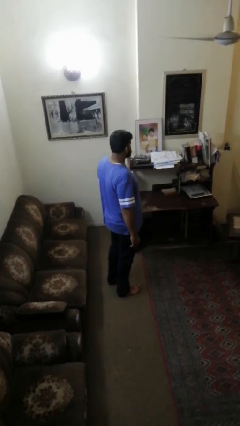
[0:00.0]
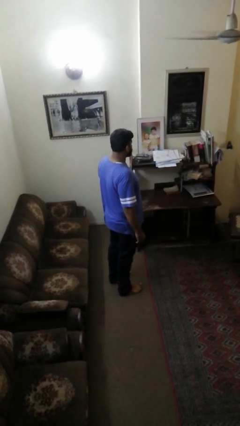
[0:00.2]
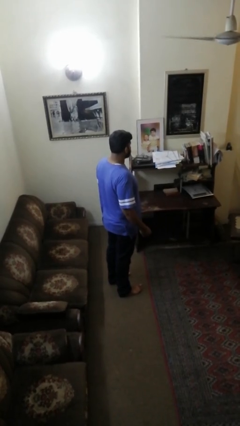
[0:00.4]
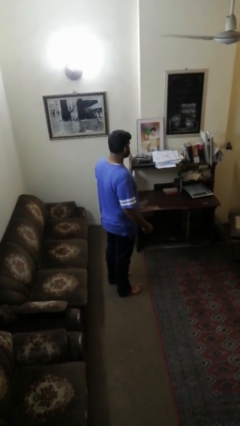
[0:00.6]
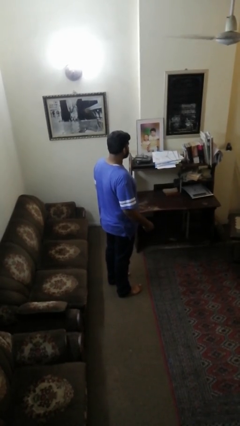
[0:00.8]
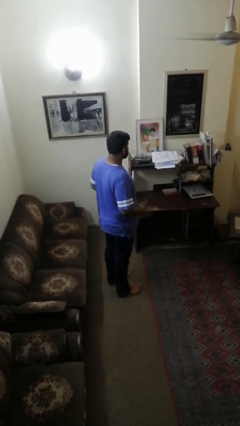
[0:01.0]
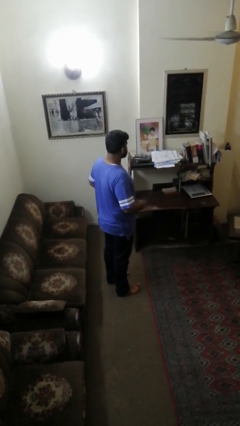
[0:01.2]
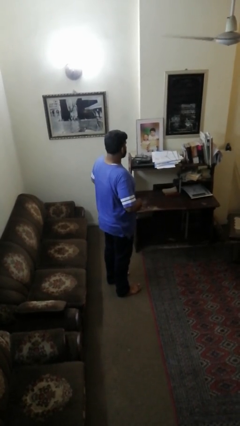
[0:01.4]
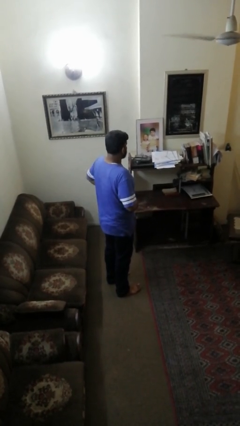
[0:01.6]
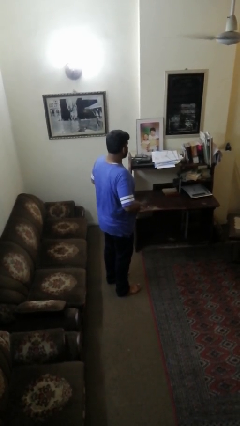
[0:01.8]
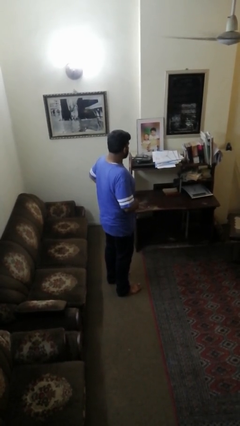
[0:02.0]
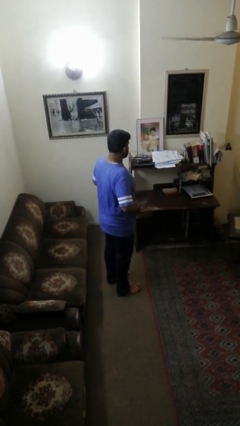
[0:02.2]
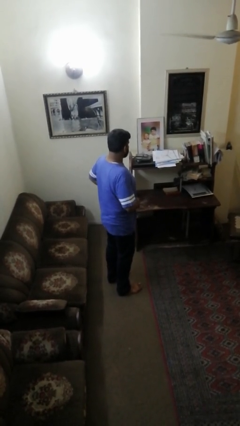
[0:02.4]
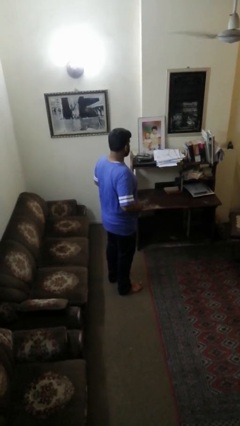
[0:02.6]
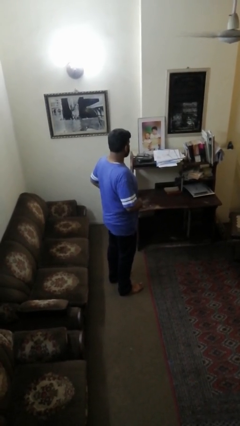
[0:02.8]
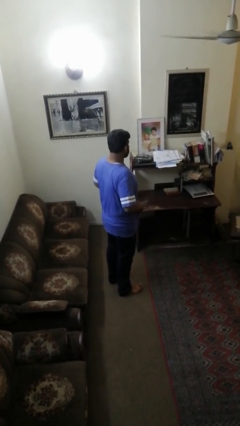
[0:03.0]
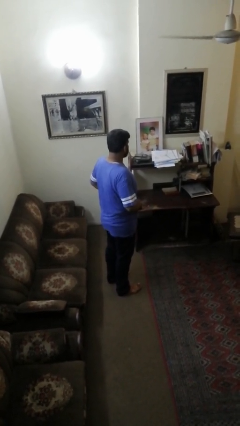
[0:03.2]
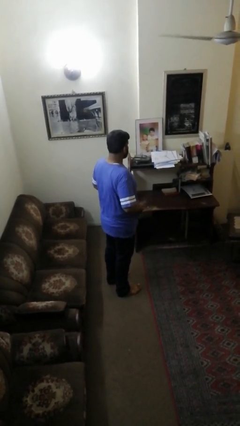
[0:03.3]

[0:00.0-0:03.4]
person hikes up pants

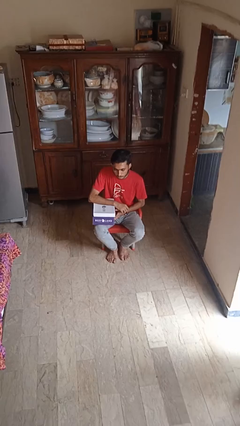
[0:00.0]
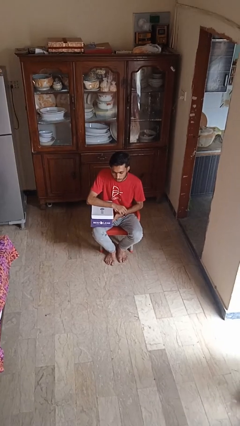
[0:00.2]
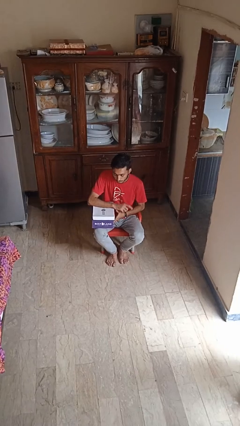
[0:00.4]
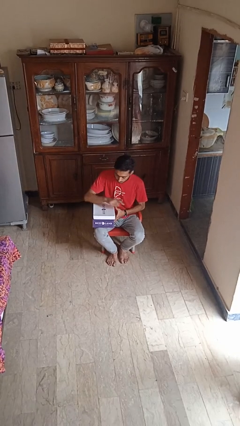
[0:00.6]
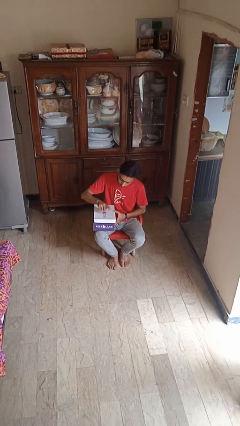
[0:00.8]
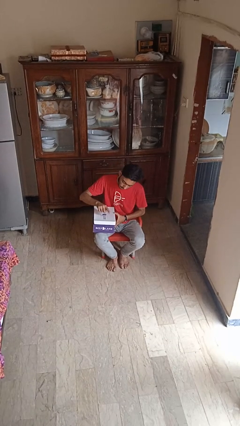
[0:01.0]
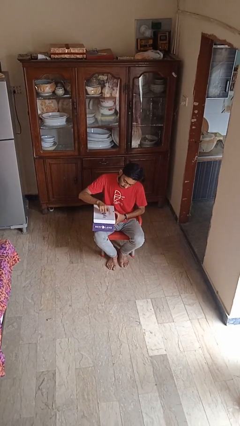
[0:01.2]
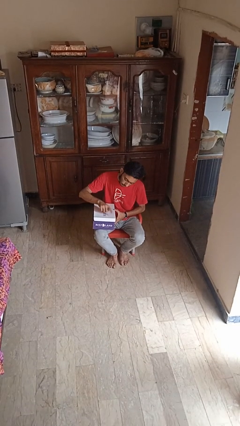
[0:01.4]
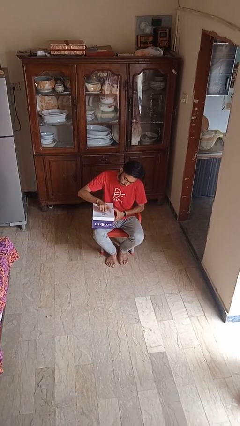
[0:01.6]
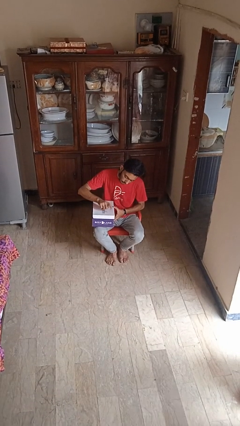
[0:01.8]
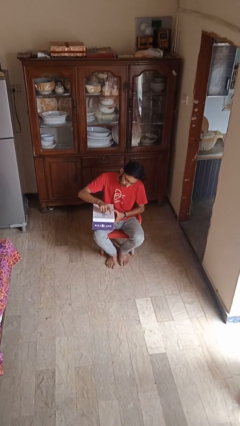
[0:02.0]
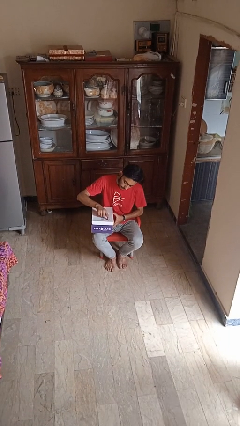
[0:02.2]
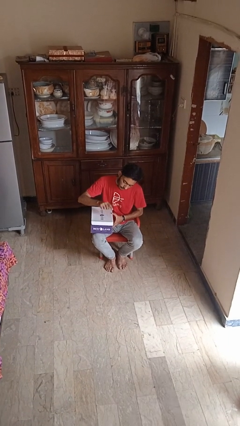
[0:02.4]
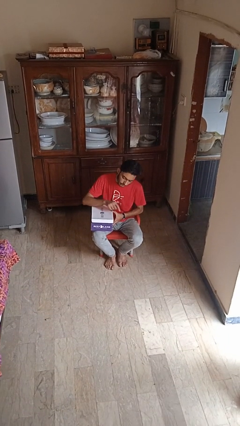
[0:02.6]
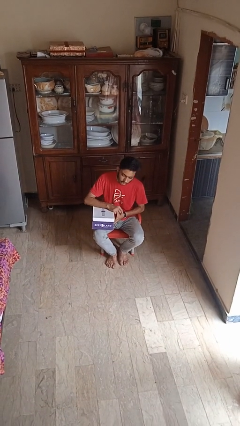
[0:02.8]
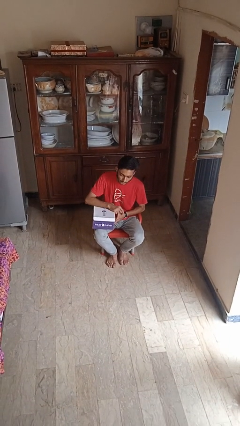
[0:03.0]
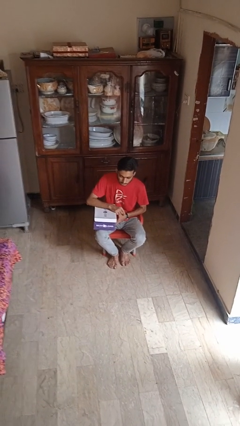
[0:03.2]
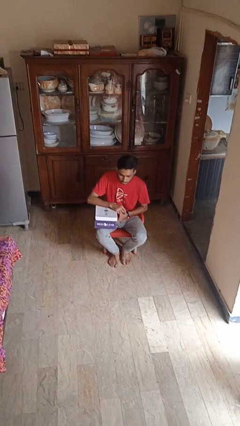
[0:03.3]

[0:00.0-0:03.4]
person taps object with finger

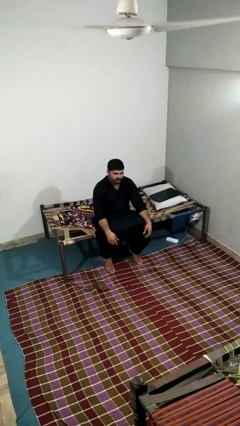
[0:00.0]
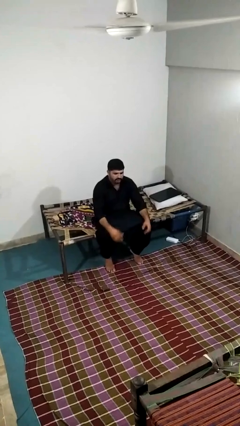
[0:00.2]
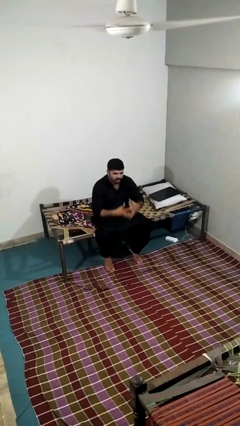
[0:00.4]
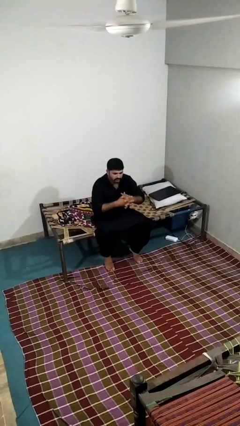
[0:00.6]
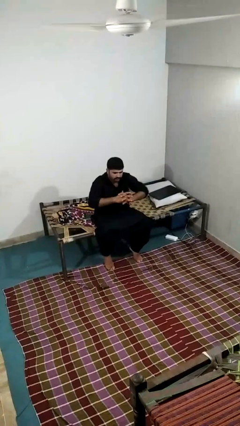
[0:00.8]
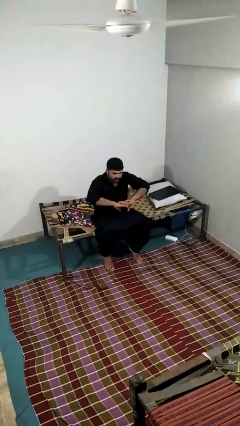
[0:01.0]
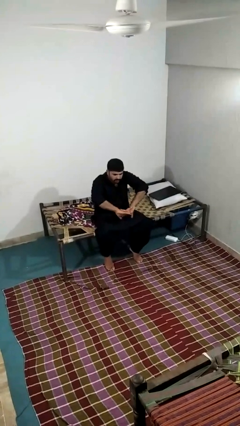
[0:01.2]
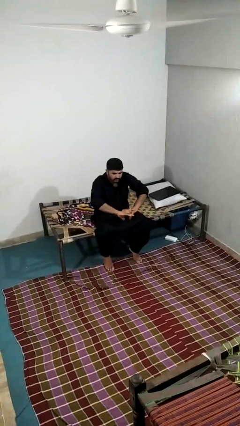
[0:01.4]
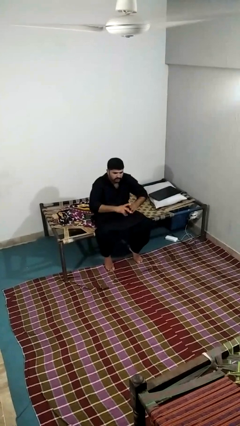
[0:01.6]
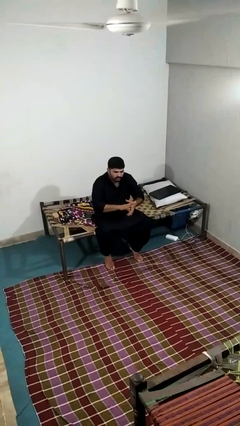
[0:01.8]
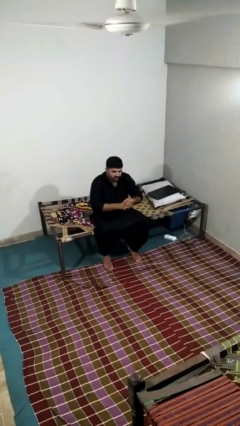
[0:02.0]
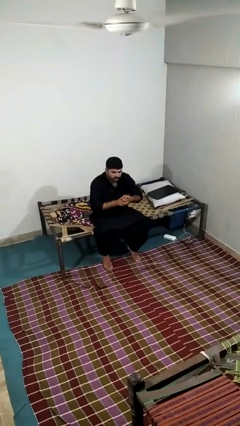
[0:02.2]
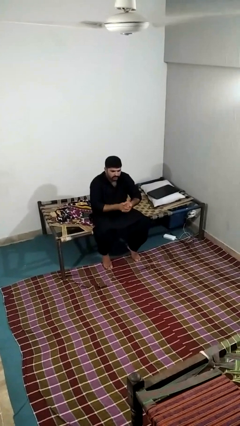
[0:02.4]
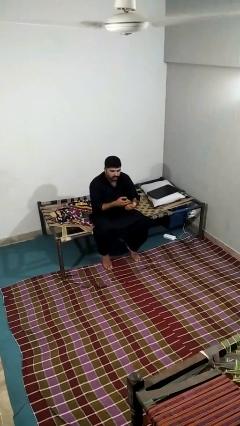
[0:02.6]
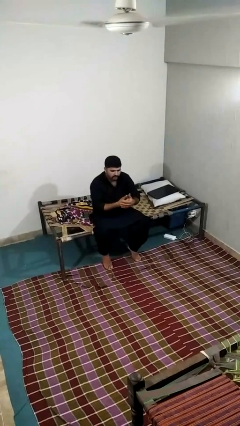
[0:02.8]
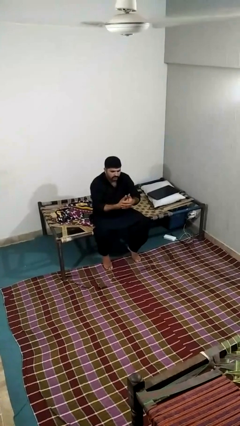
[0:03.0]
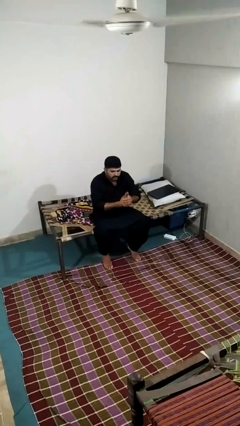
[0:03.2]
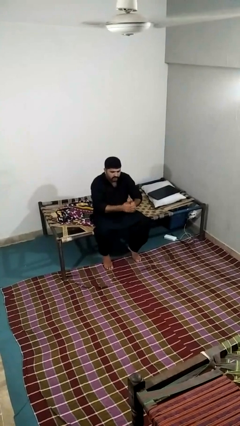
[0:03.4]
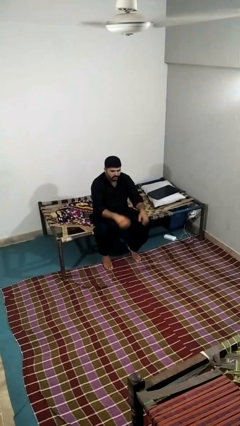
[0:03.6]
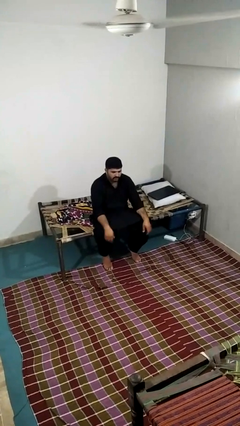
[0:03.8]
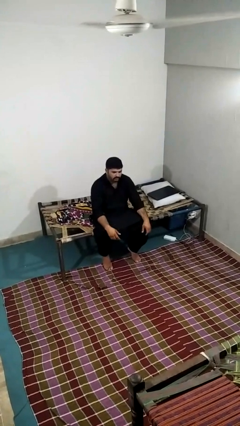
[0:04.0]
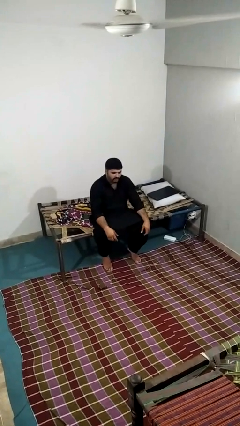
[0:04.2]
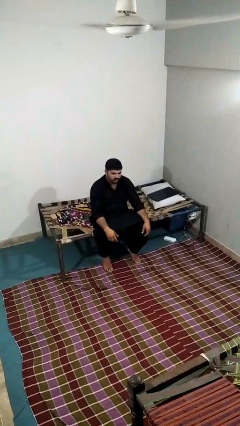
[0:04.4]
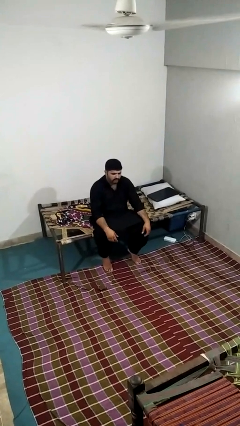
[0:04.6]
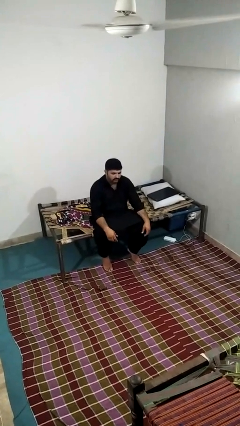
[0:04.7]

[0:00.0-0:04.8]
person cracks knuckles

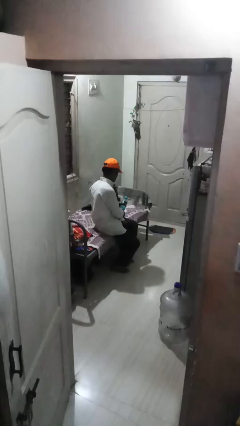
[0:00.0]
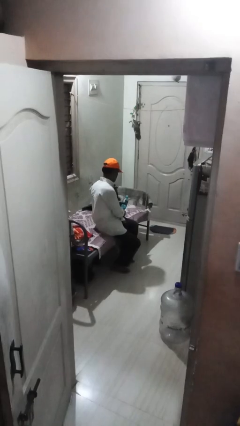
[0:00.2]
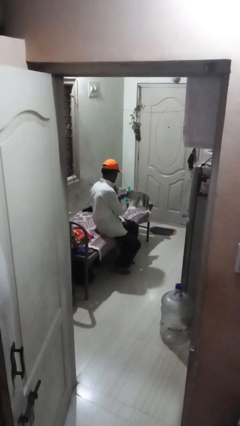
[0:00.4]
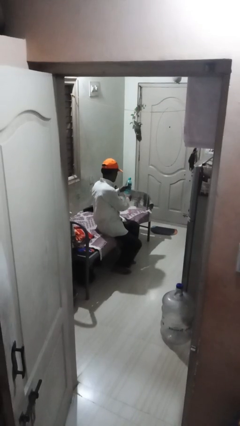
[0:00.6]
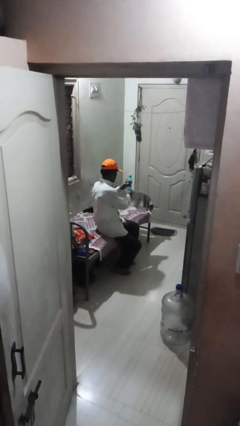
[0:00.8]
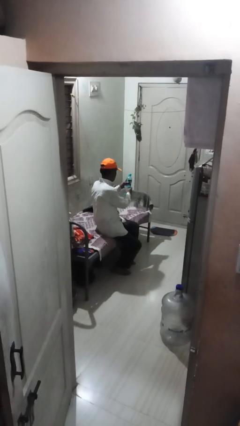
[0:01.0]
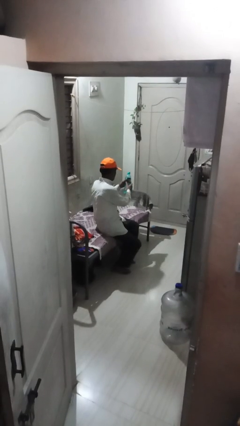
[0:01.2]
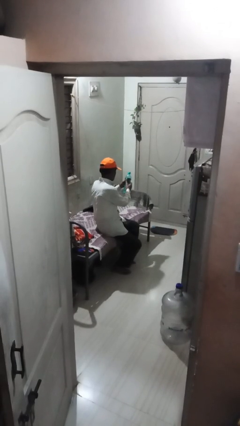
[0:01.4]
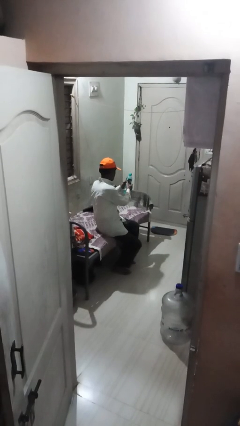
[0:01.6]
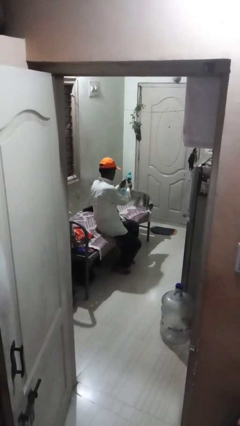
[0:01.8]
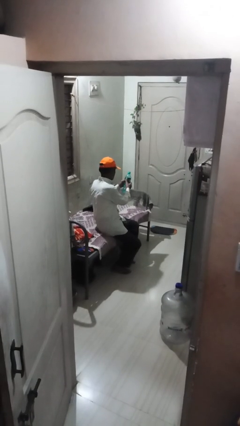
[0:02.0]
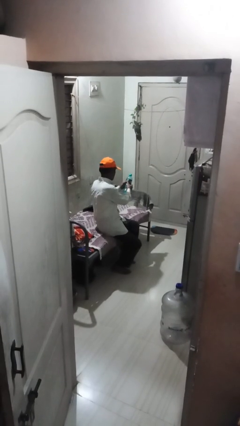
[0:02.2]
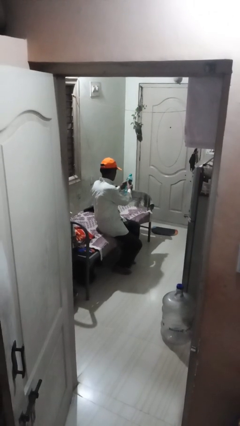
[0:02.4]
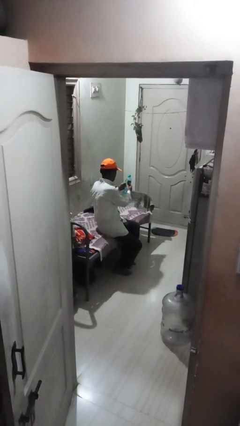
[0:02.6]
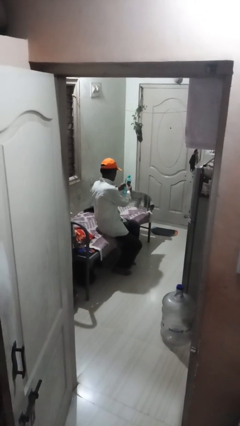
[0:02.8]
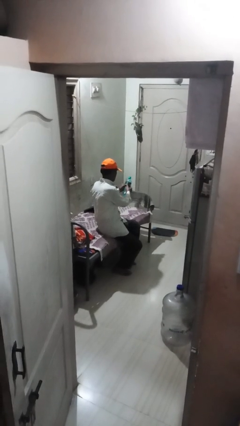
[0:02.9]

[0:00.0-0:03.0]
person squeezes object

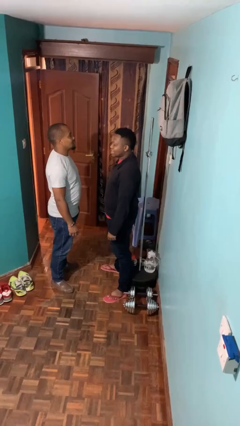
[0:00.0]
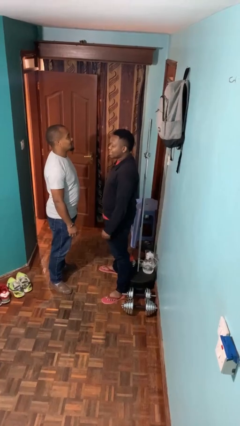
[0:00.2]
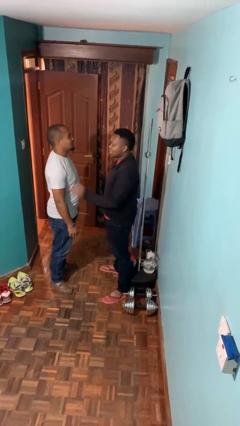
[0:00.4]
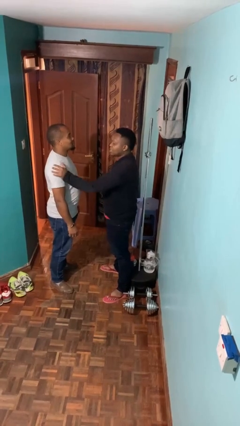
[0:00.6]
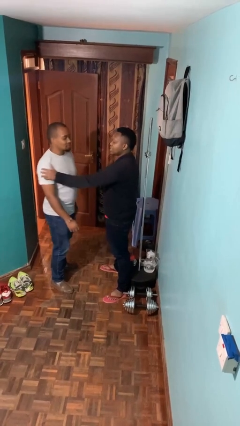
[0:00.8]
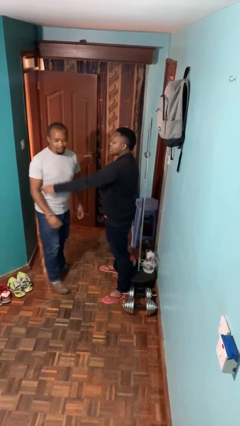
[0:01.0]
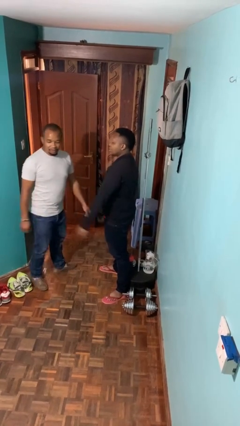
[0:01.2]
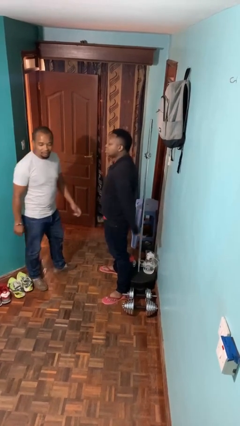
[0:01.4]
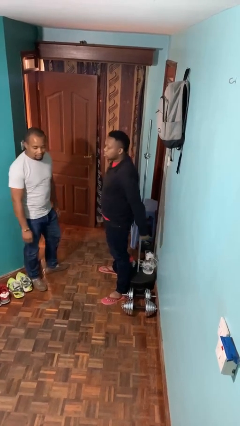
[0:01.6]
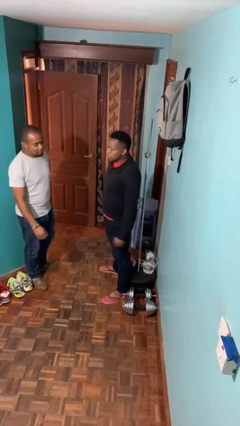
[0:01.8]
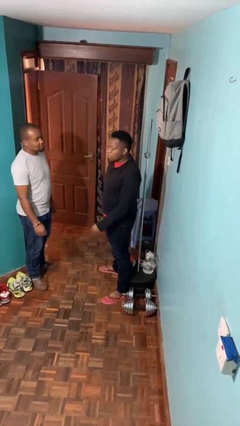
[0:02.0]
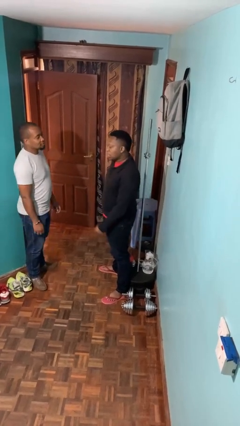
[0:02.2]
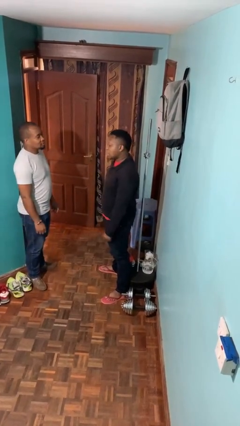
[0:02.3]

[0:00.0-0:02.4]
person shoves person

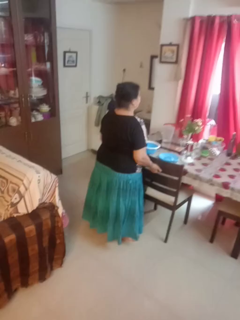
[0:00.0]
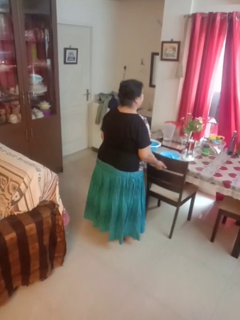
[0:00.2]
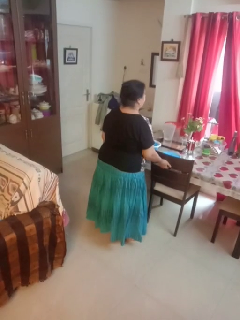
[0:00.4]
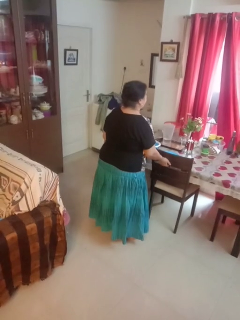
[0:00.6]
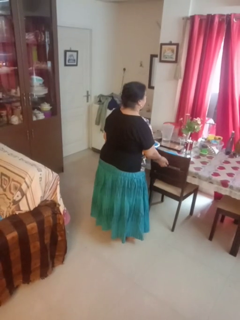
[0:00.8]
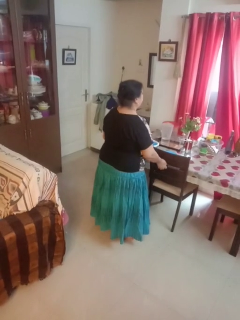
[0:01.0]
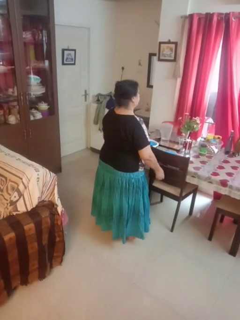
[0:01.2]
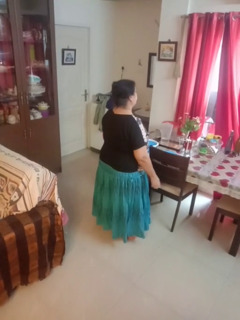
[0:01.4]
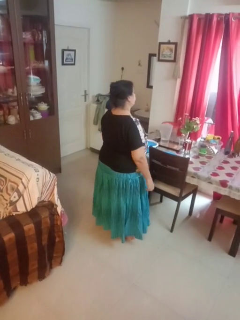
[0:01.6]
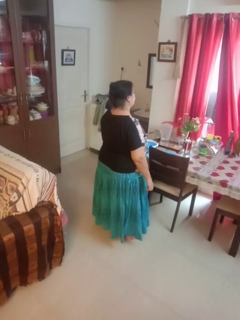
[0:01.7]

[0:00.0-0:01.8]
person pushes in chair
